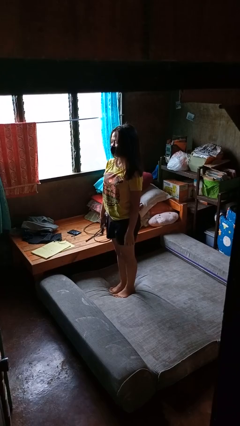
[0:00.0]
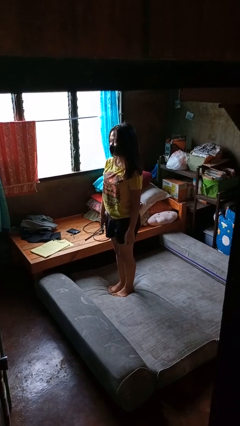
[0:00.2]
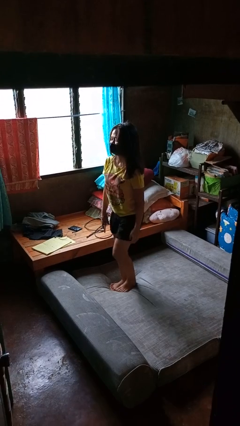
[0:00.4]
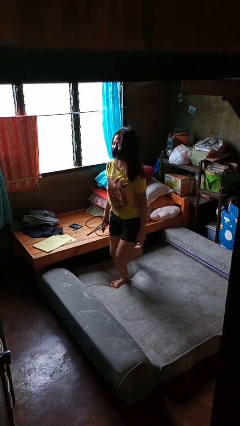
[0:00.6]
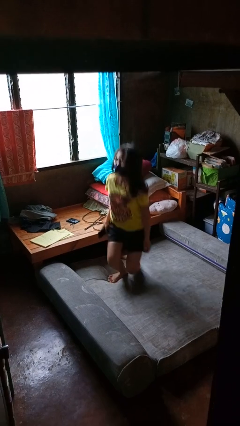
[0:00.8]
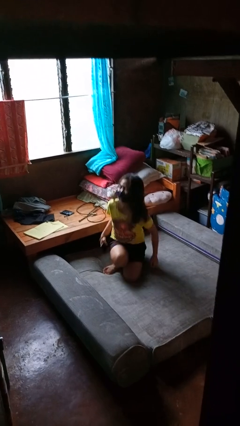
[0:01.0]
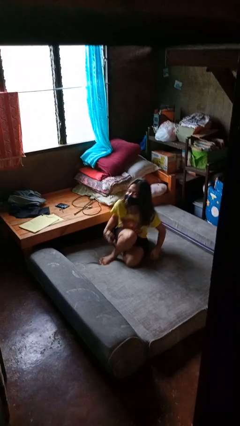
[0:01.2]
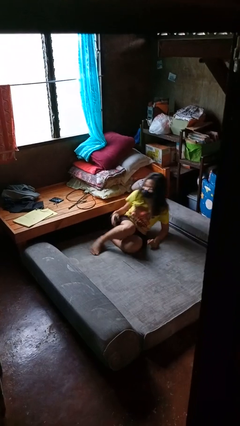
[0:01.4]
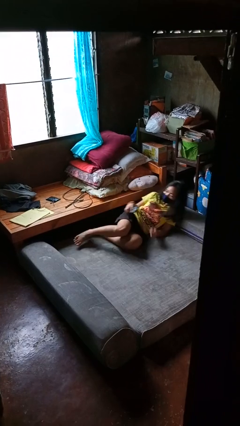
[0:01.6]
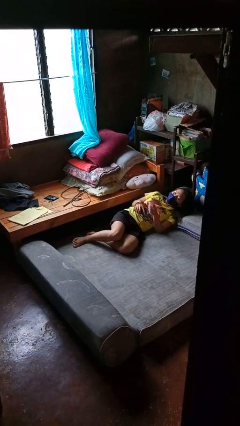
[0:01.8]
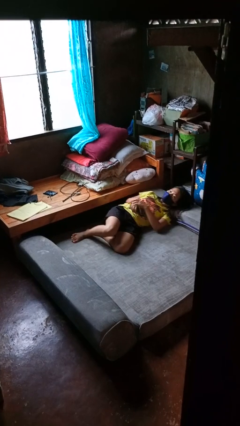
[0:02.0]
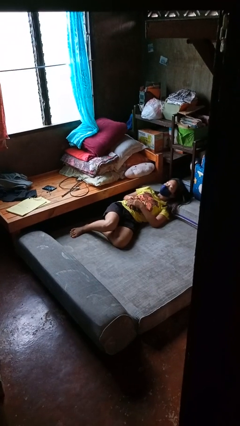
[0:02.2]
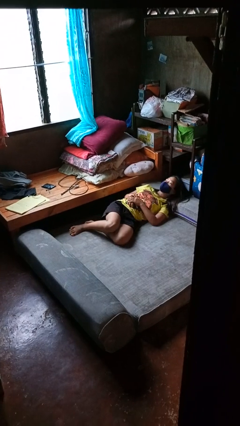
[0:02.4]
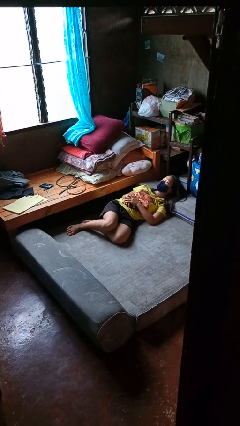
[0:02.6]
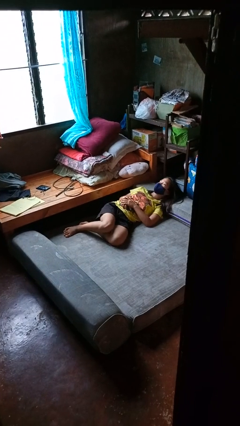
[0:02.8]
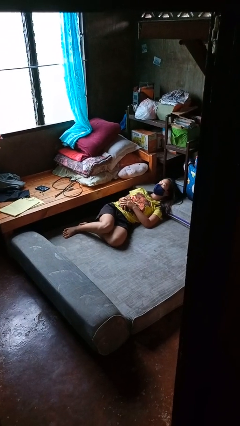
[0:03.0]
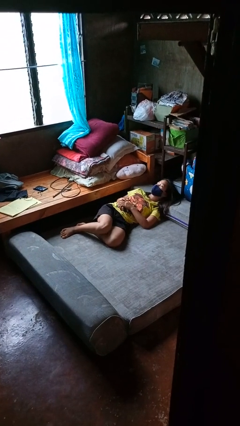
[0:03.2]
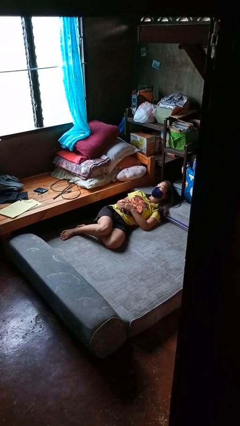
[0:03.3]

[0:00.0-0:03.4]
person lies down on bed

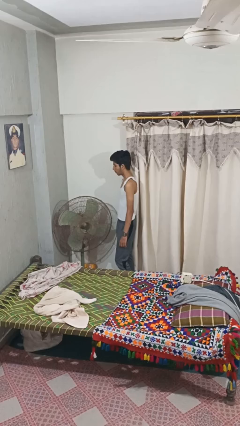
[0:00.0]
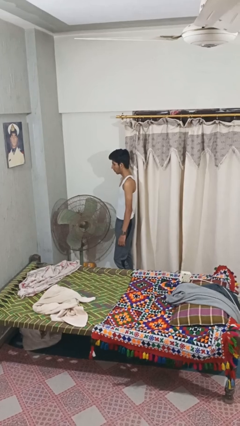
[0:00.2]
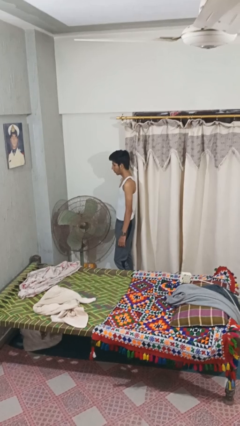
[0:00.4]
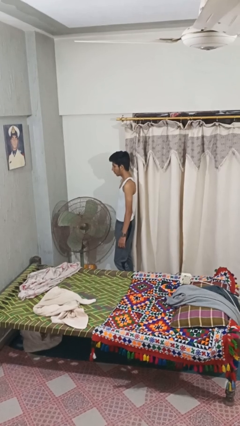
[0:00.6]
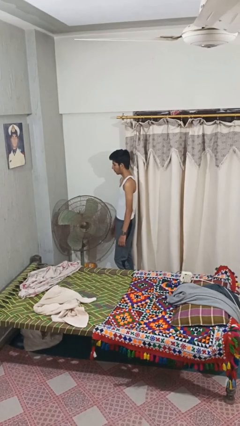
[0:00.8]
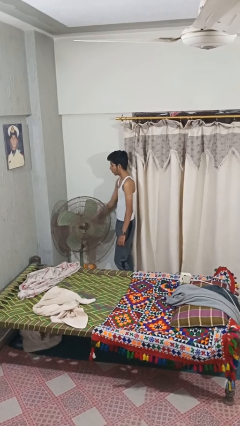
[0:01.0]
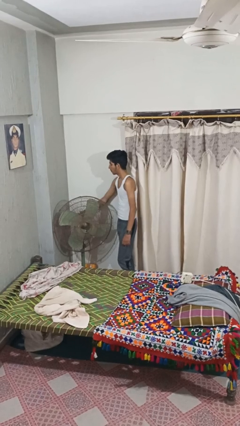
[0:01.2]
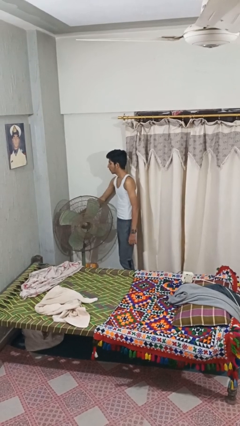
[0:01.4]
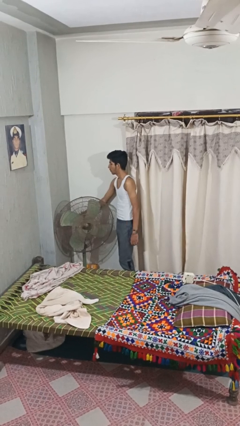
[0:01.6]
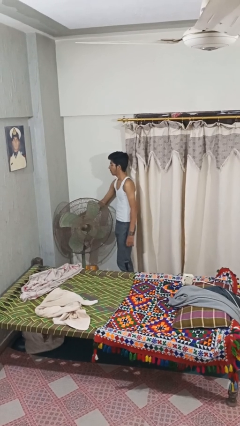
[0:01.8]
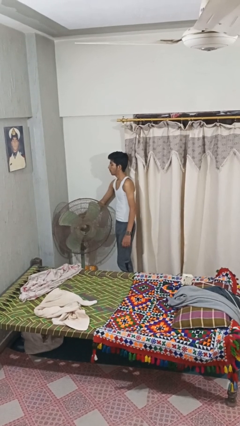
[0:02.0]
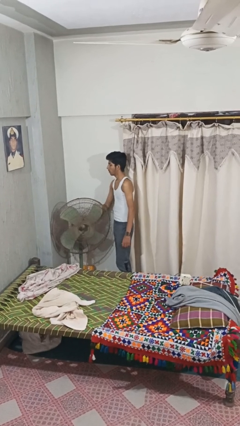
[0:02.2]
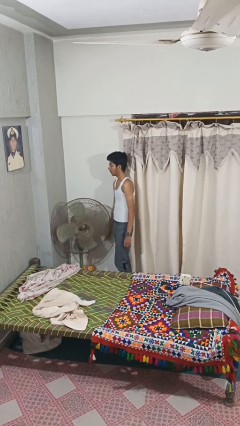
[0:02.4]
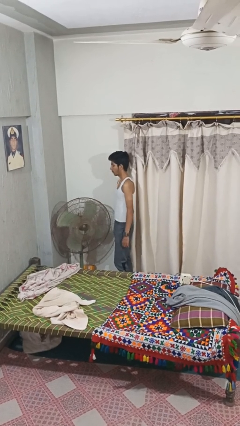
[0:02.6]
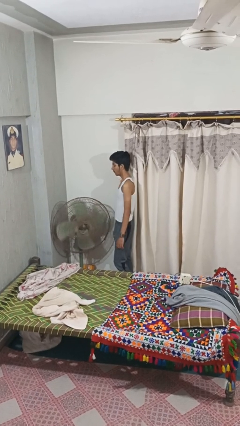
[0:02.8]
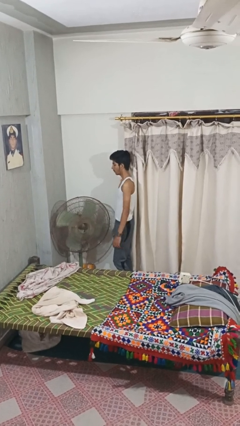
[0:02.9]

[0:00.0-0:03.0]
person turns on fan

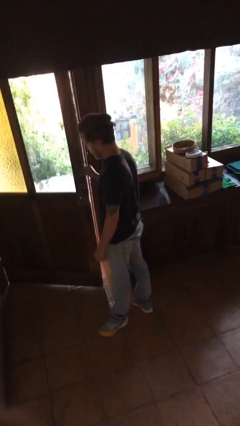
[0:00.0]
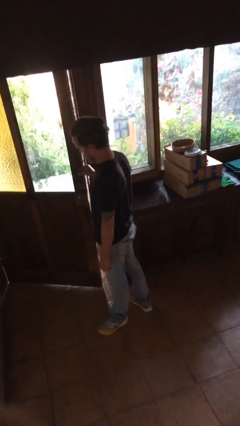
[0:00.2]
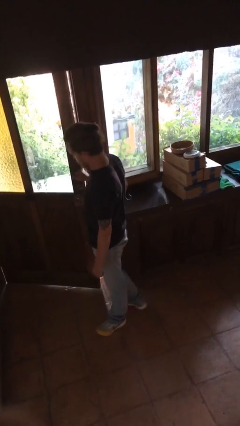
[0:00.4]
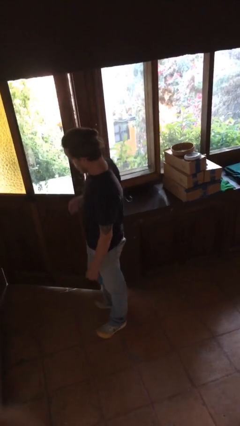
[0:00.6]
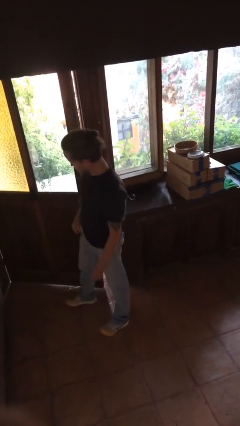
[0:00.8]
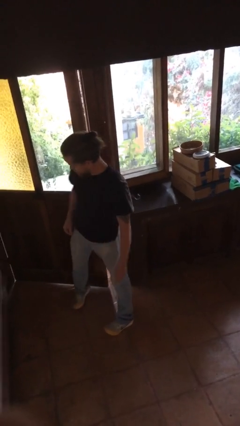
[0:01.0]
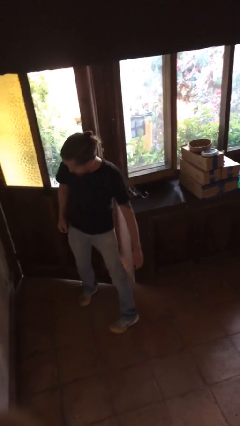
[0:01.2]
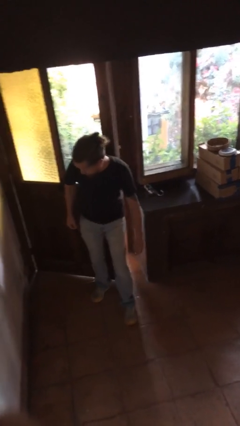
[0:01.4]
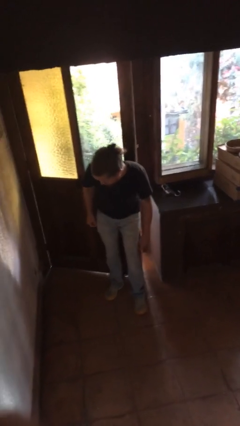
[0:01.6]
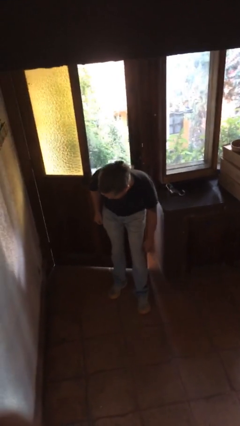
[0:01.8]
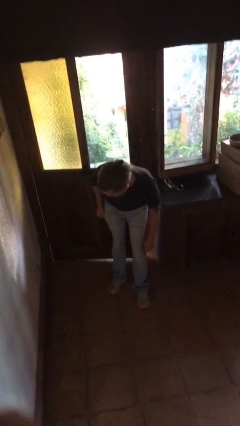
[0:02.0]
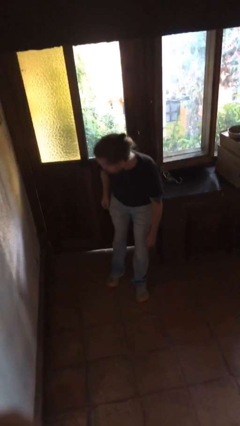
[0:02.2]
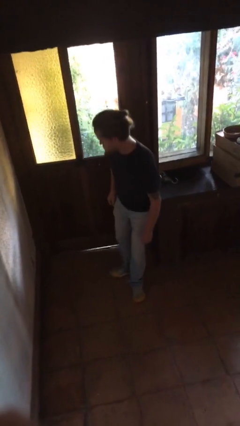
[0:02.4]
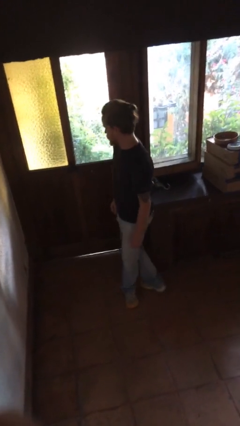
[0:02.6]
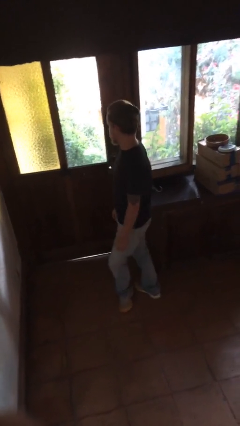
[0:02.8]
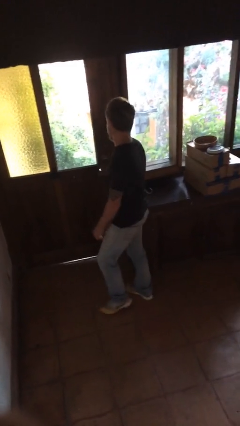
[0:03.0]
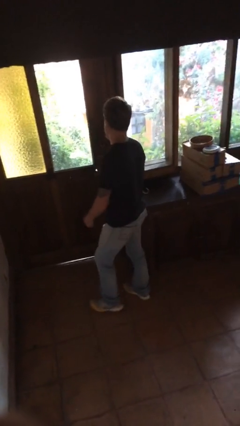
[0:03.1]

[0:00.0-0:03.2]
person closes door with hip

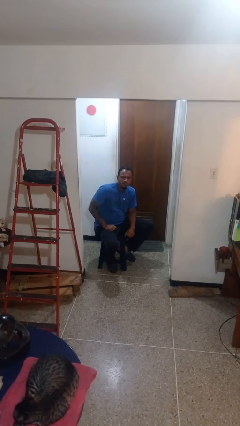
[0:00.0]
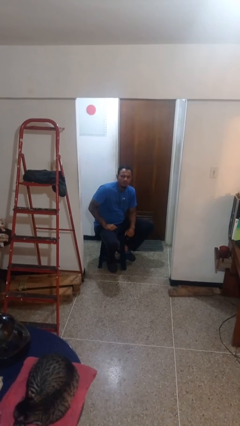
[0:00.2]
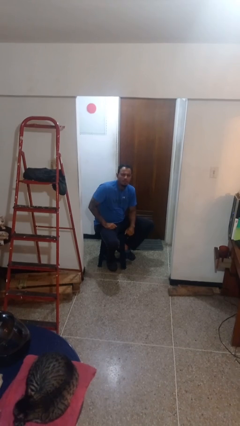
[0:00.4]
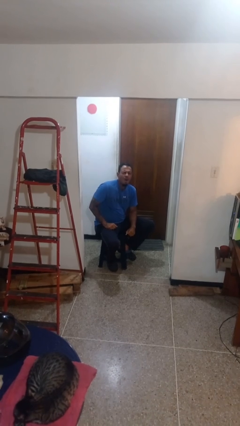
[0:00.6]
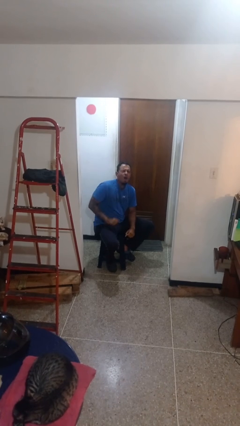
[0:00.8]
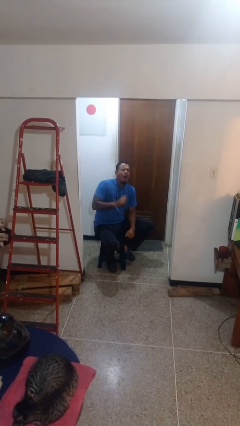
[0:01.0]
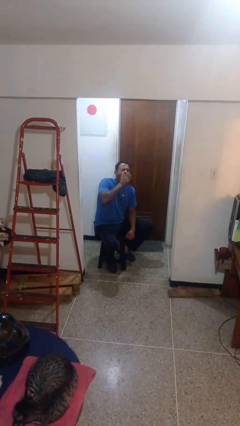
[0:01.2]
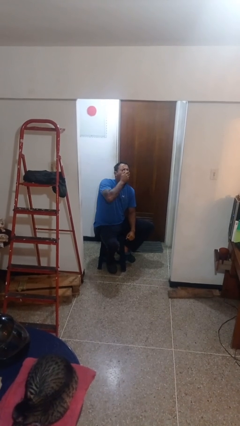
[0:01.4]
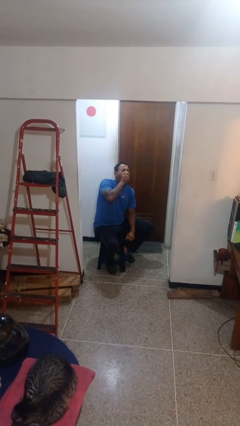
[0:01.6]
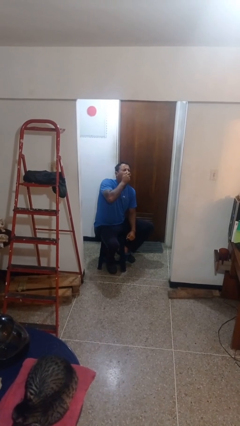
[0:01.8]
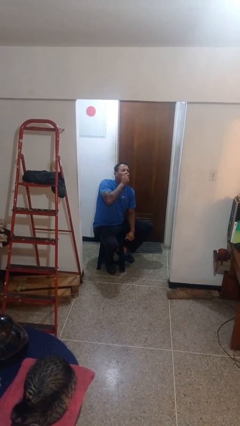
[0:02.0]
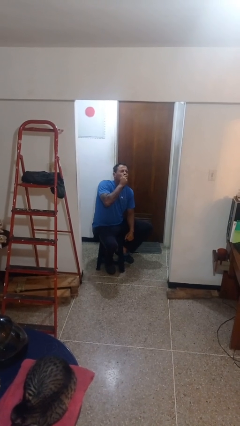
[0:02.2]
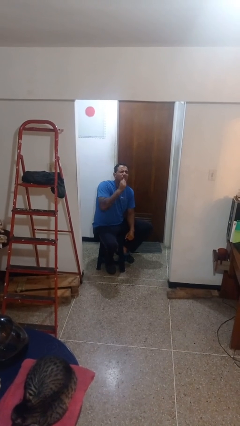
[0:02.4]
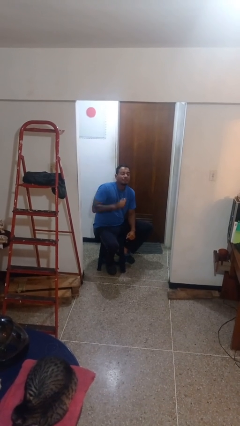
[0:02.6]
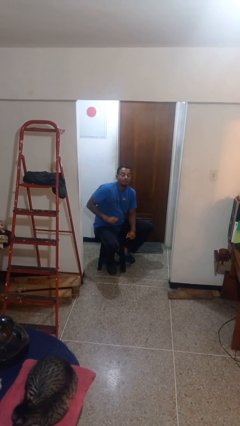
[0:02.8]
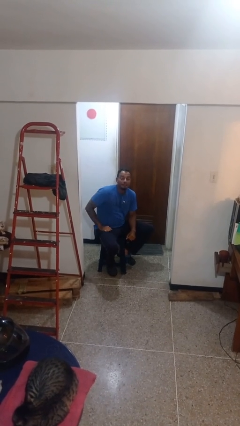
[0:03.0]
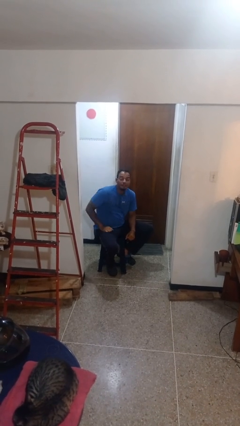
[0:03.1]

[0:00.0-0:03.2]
person yawns

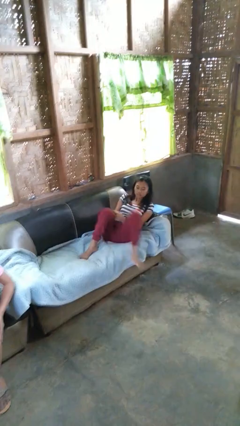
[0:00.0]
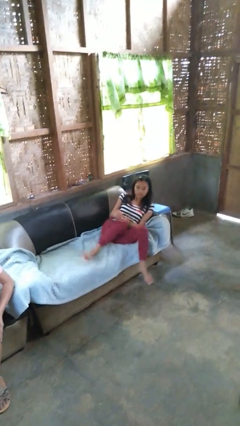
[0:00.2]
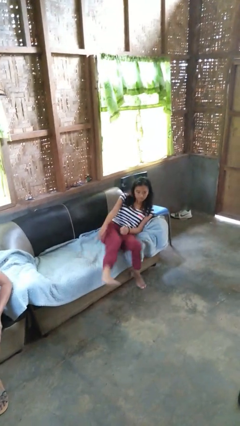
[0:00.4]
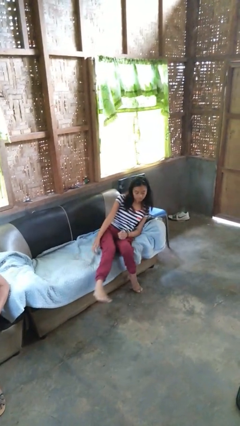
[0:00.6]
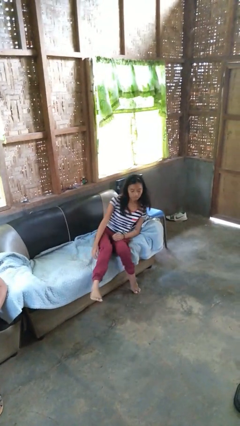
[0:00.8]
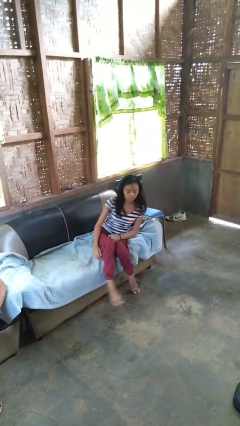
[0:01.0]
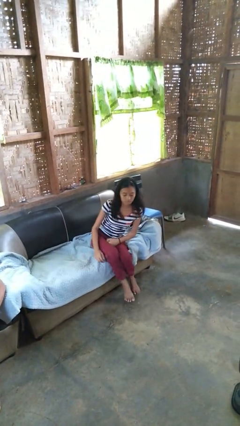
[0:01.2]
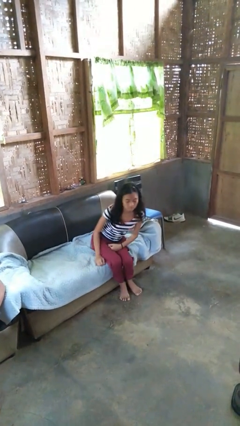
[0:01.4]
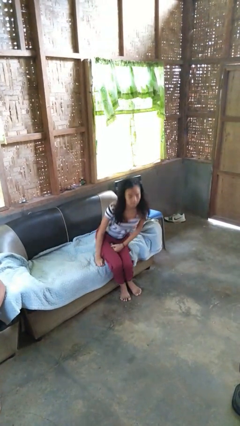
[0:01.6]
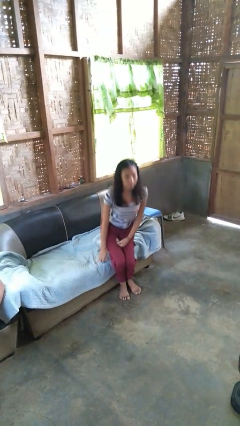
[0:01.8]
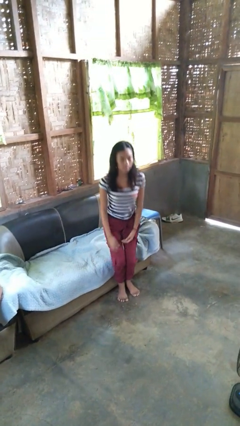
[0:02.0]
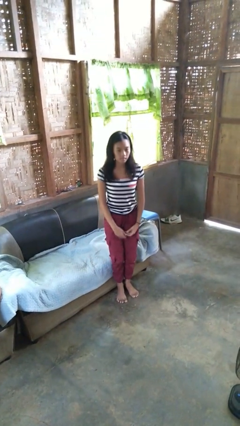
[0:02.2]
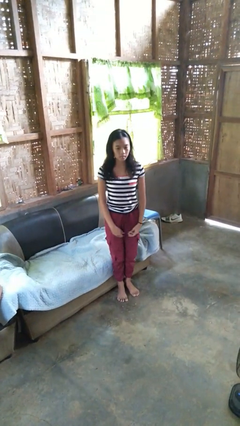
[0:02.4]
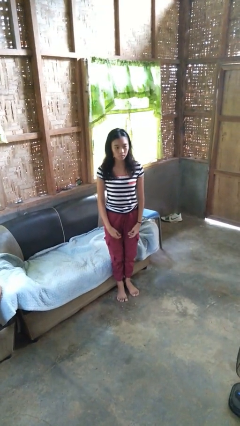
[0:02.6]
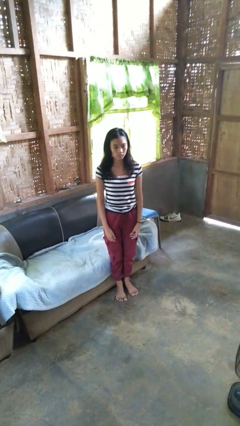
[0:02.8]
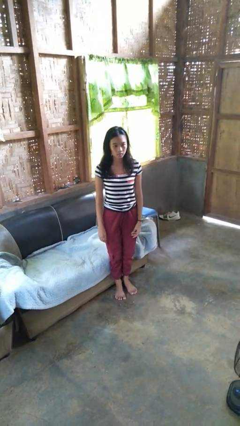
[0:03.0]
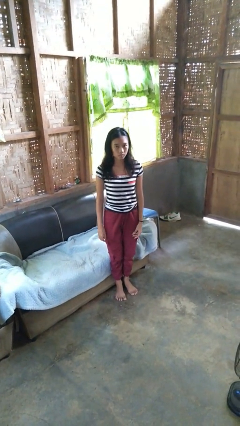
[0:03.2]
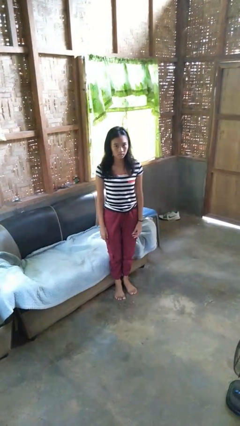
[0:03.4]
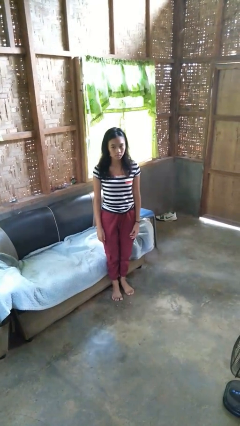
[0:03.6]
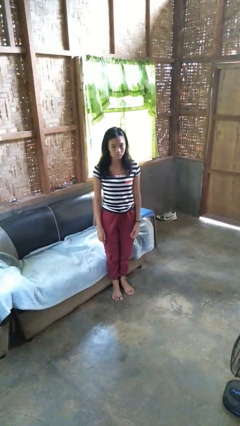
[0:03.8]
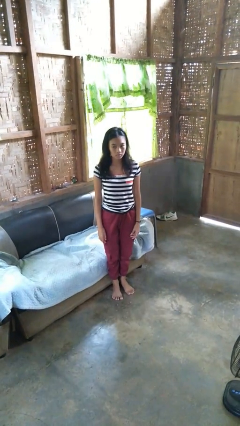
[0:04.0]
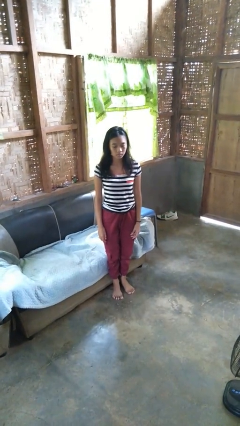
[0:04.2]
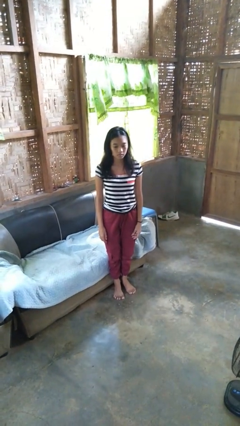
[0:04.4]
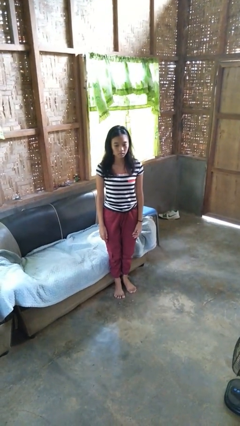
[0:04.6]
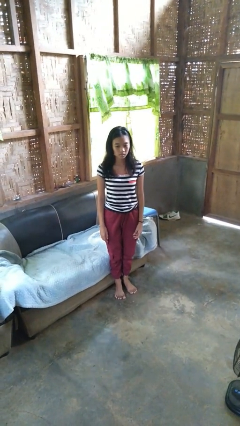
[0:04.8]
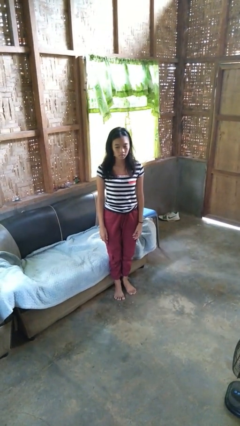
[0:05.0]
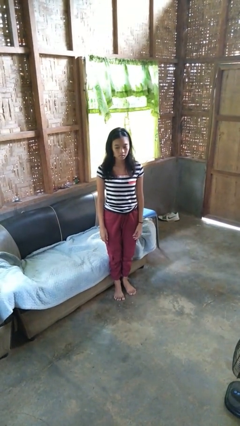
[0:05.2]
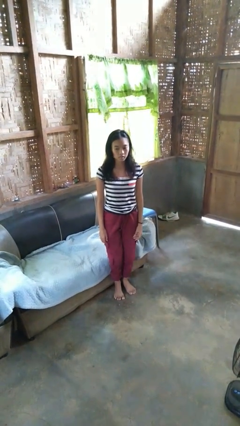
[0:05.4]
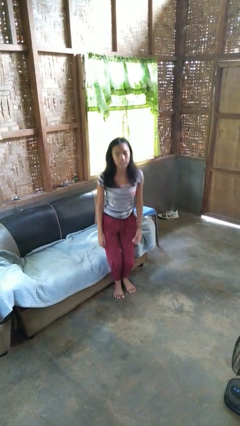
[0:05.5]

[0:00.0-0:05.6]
person stands up
